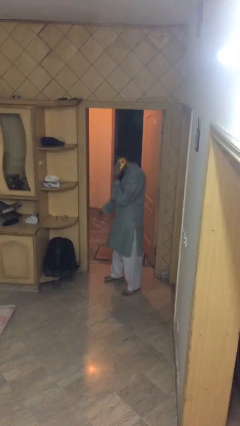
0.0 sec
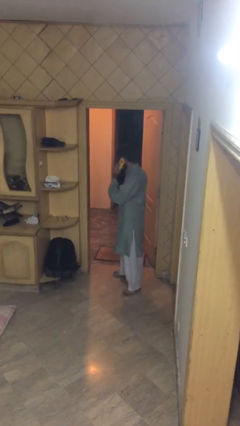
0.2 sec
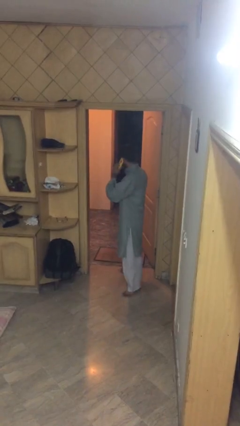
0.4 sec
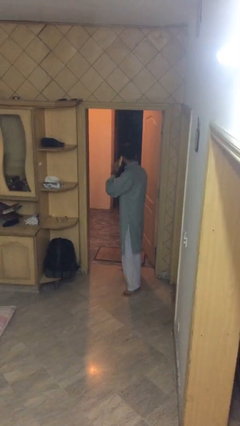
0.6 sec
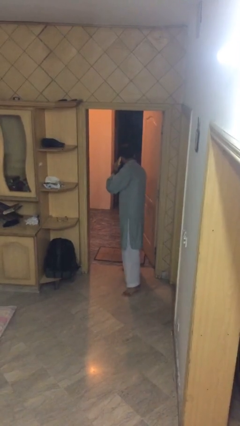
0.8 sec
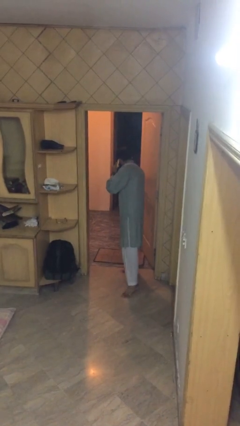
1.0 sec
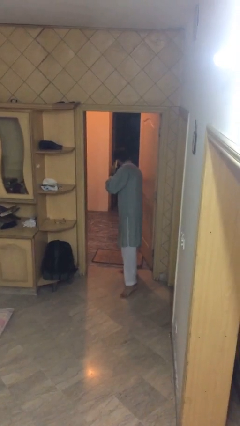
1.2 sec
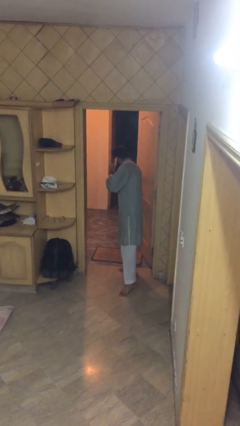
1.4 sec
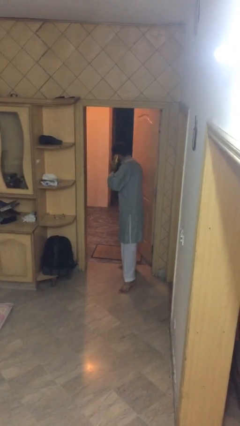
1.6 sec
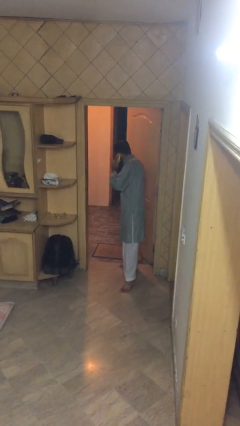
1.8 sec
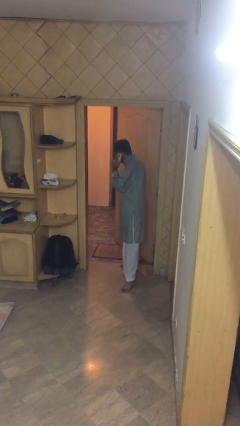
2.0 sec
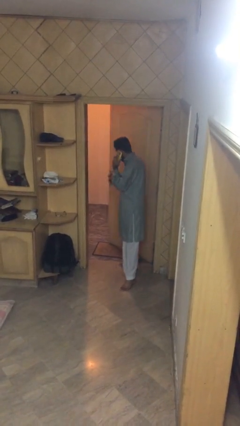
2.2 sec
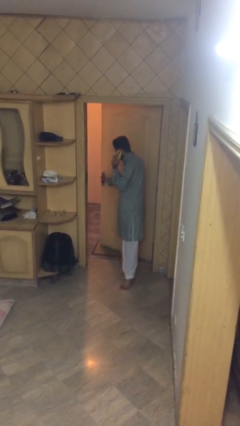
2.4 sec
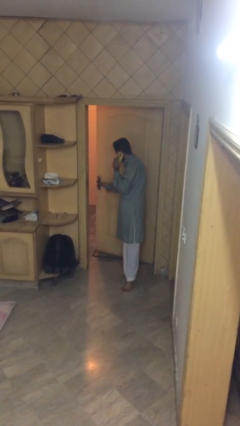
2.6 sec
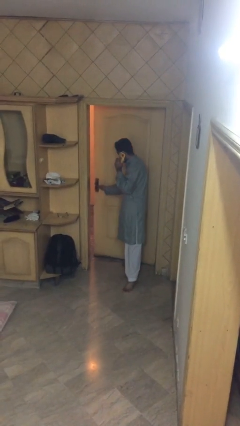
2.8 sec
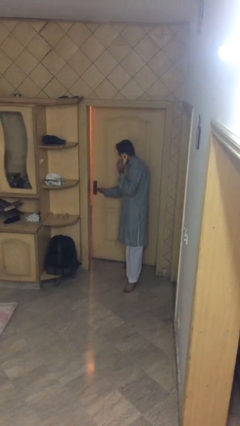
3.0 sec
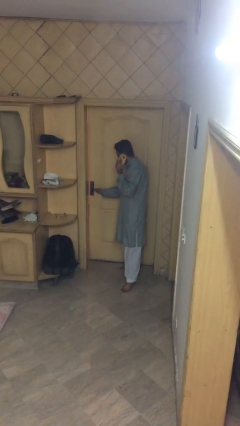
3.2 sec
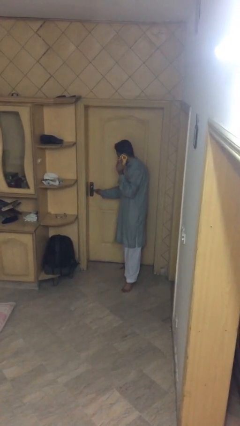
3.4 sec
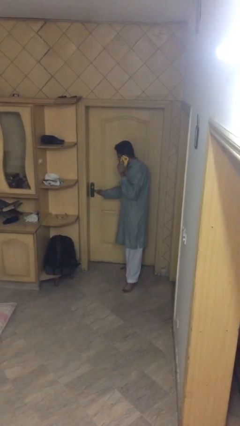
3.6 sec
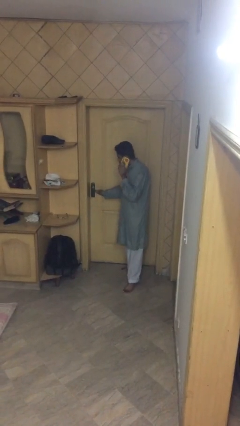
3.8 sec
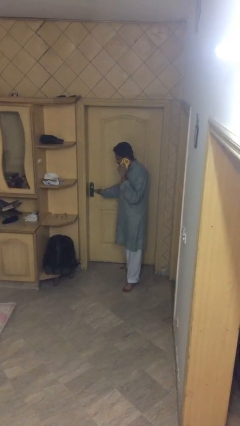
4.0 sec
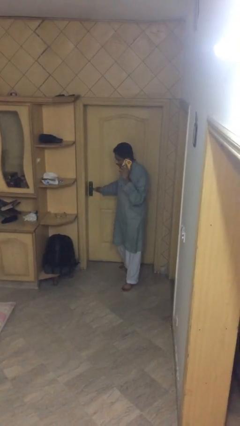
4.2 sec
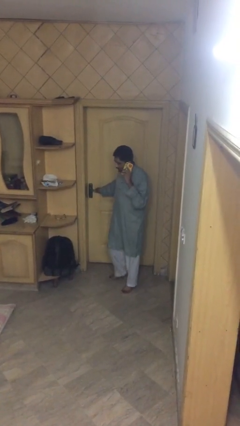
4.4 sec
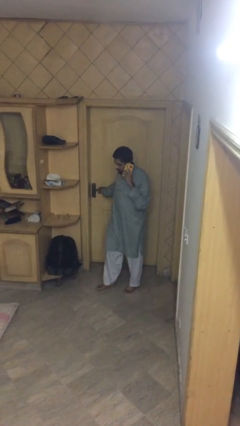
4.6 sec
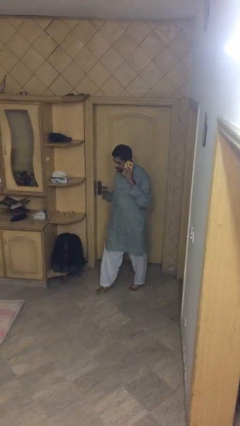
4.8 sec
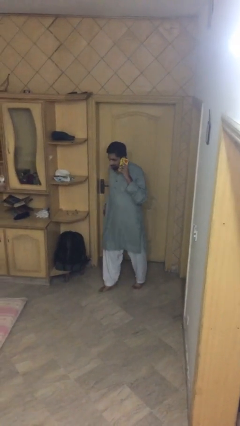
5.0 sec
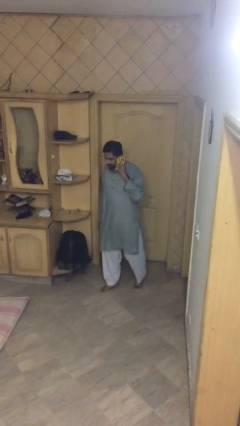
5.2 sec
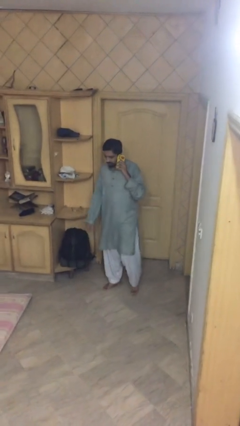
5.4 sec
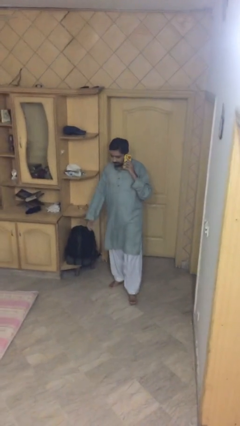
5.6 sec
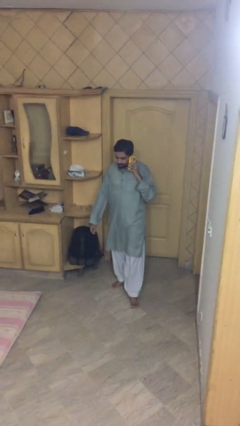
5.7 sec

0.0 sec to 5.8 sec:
person closes facility door

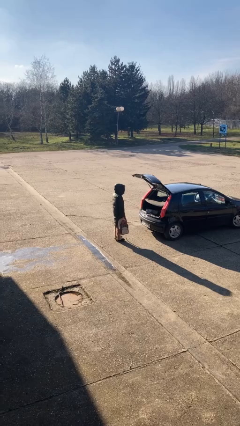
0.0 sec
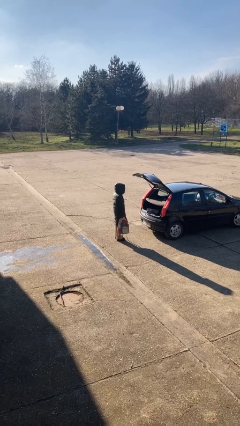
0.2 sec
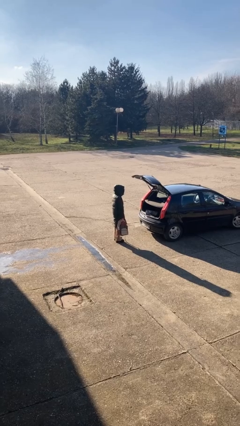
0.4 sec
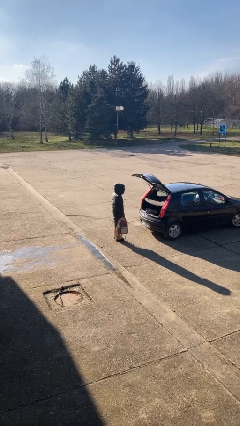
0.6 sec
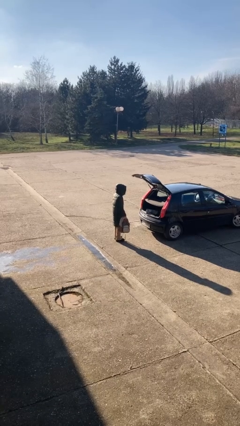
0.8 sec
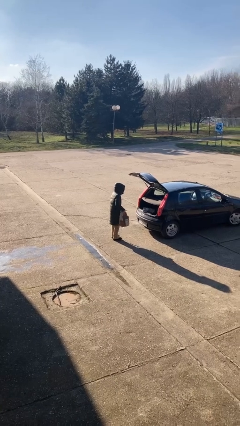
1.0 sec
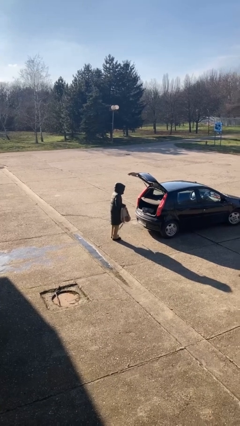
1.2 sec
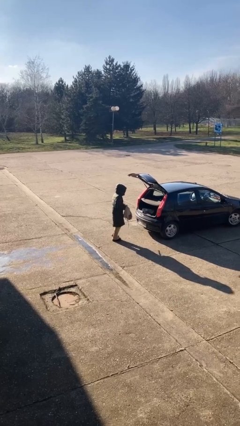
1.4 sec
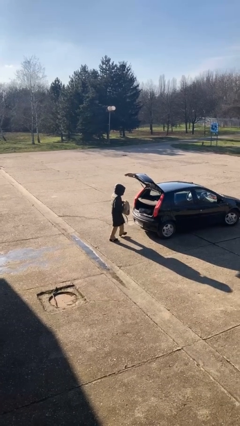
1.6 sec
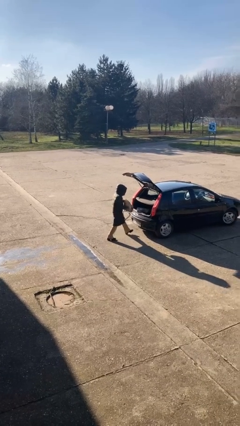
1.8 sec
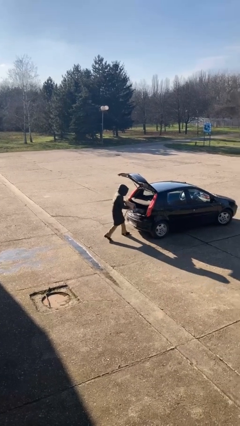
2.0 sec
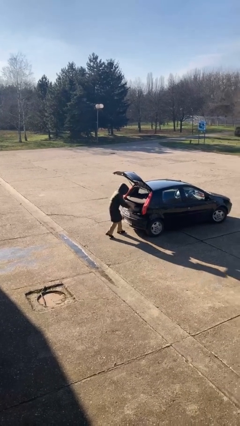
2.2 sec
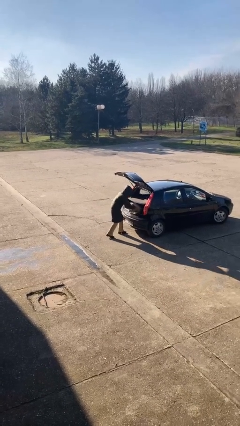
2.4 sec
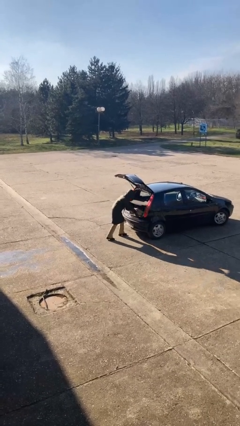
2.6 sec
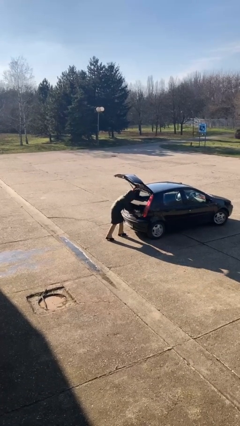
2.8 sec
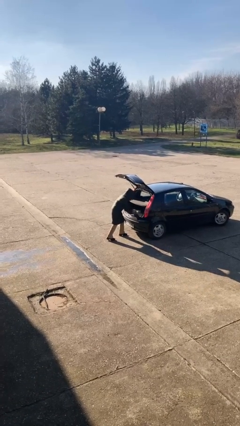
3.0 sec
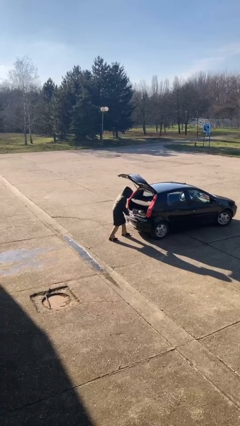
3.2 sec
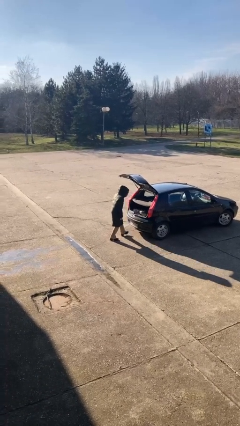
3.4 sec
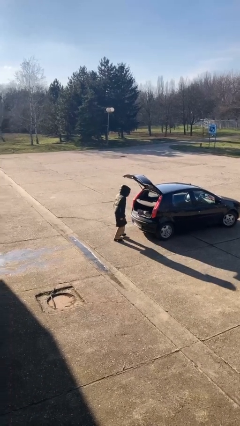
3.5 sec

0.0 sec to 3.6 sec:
person loads car

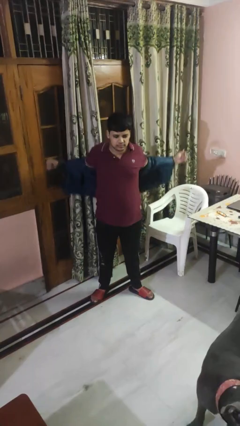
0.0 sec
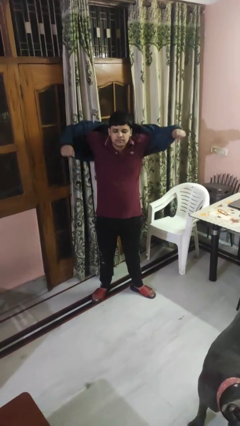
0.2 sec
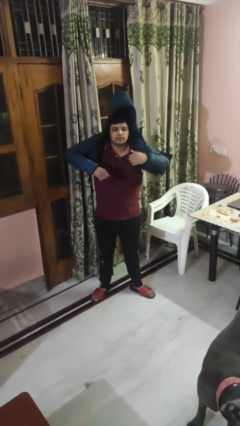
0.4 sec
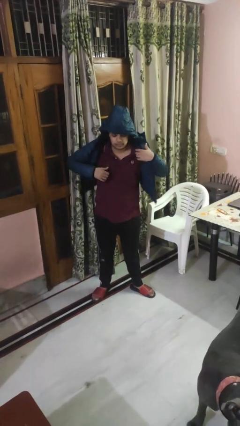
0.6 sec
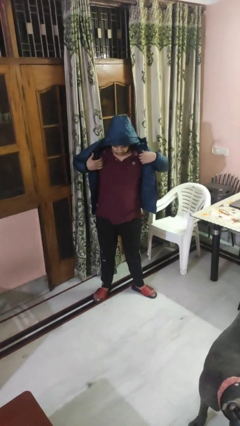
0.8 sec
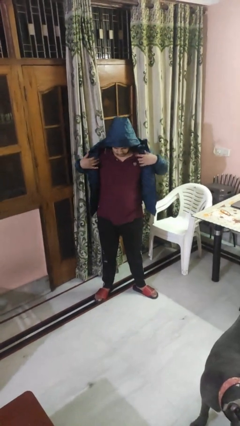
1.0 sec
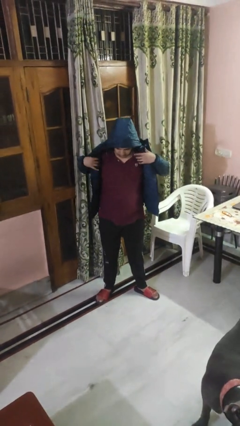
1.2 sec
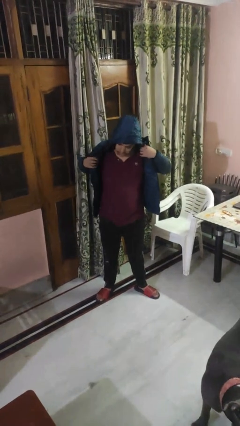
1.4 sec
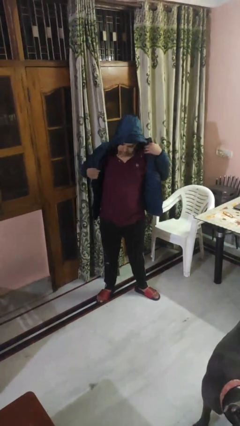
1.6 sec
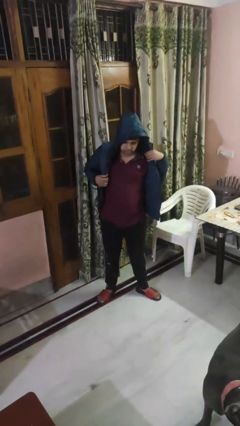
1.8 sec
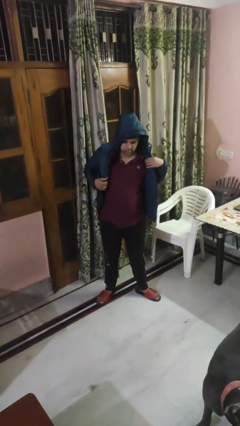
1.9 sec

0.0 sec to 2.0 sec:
person puts on hoodie

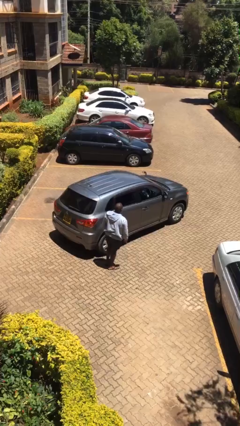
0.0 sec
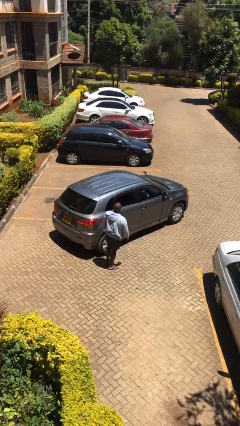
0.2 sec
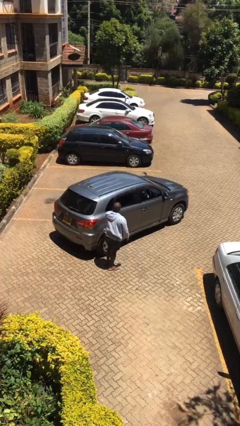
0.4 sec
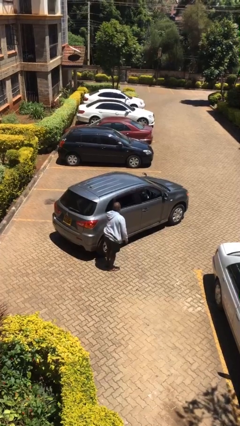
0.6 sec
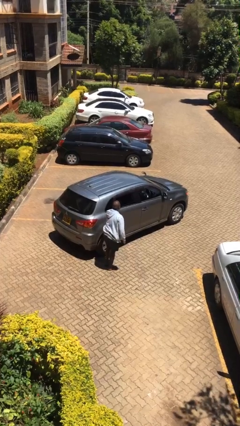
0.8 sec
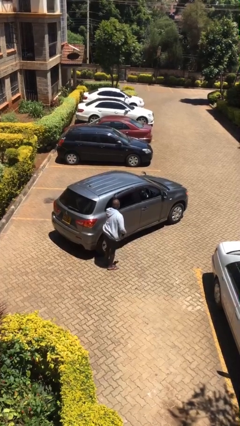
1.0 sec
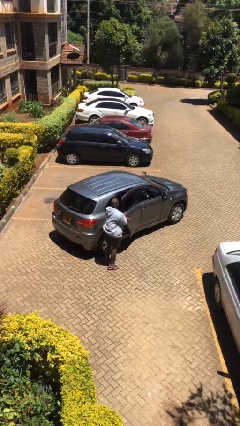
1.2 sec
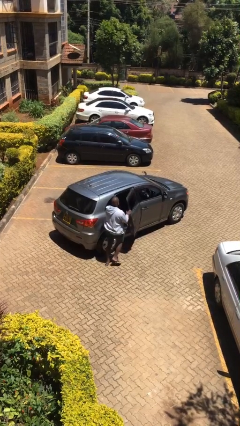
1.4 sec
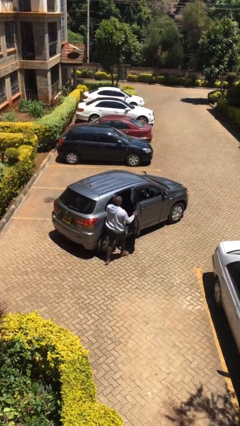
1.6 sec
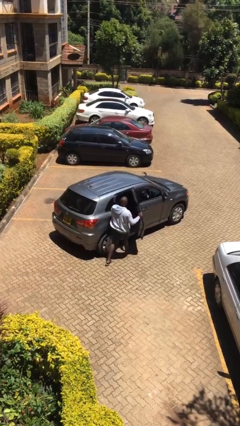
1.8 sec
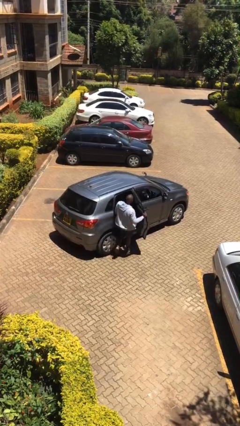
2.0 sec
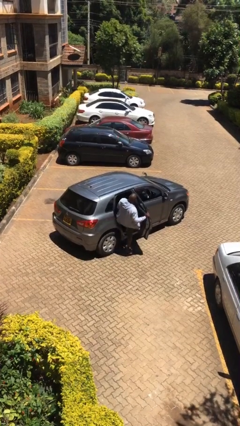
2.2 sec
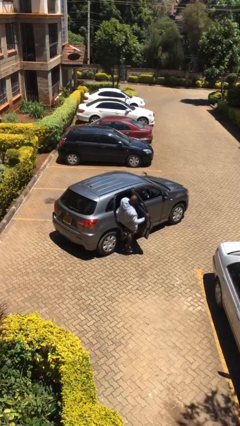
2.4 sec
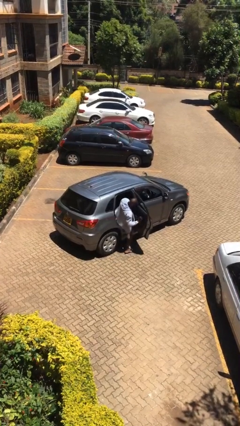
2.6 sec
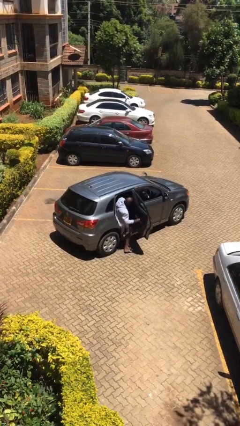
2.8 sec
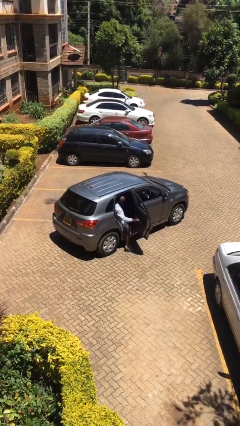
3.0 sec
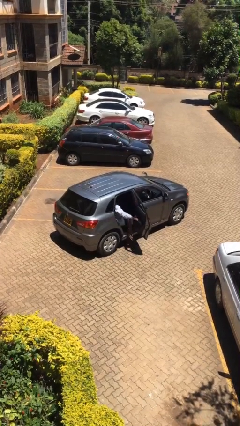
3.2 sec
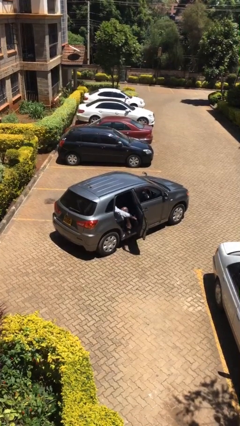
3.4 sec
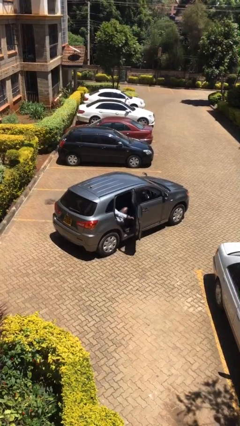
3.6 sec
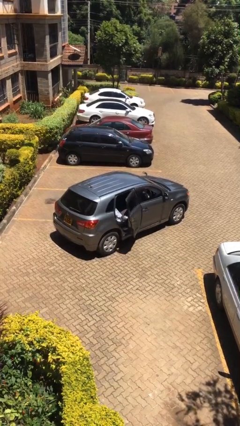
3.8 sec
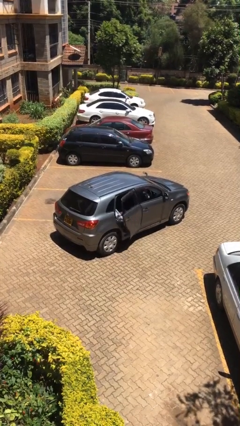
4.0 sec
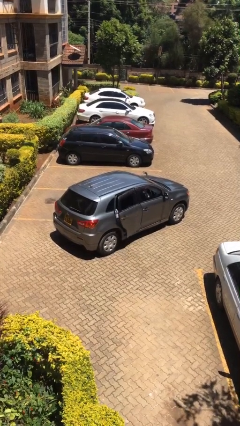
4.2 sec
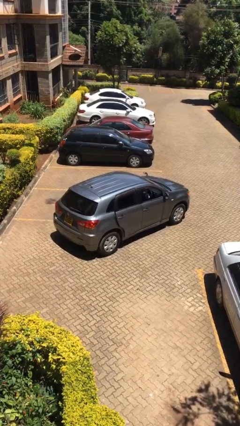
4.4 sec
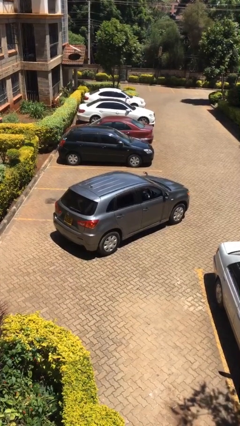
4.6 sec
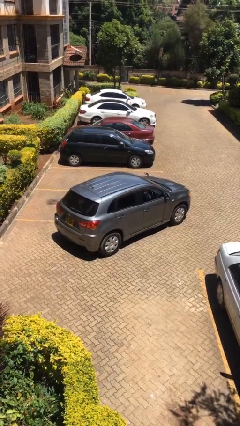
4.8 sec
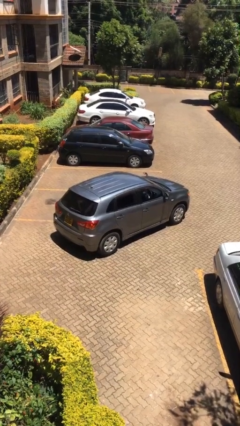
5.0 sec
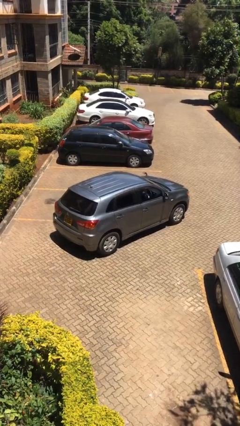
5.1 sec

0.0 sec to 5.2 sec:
car picks up person

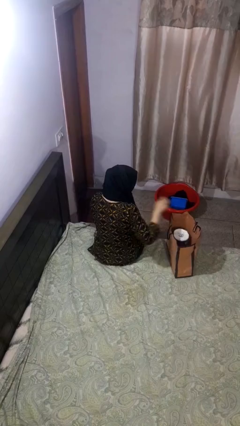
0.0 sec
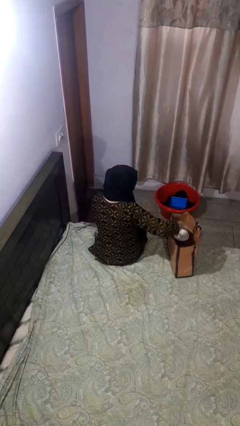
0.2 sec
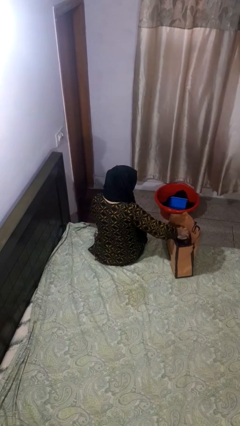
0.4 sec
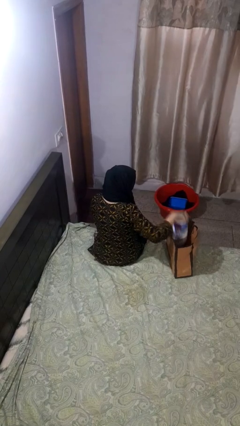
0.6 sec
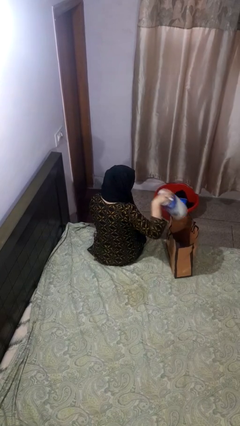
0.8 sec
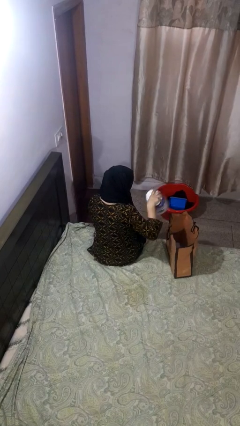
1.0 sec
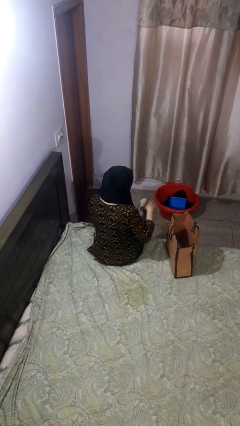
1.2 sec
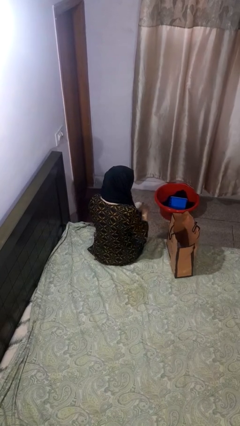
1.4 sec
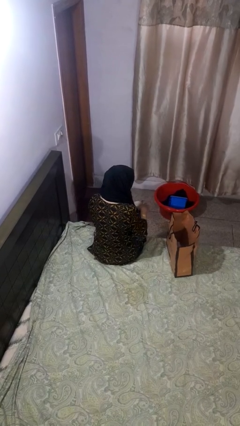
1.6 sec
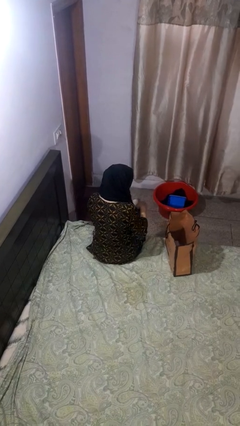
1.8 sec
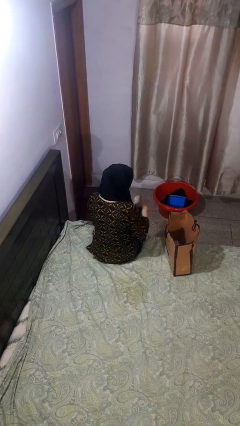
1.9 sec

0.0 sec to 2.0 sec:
person takes object from bag
